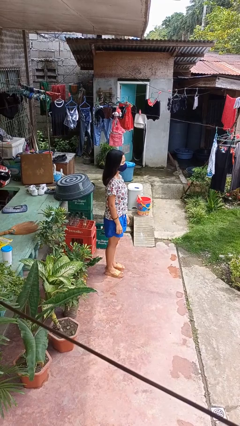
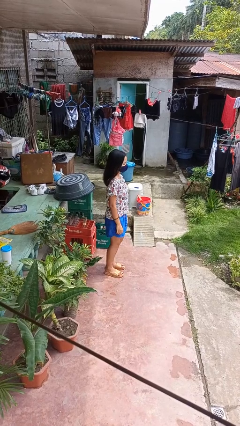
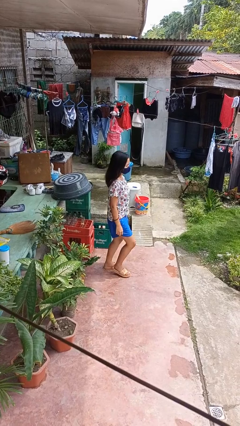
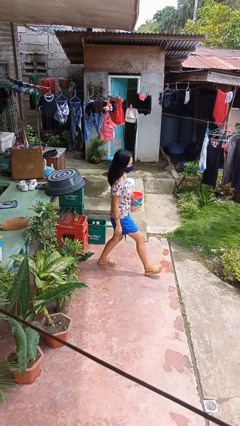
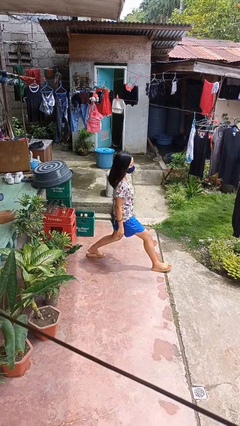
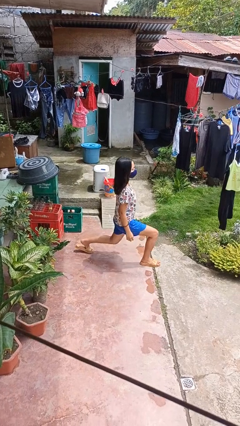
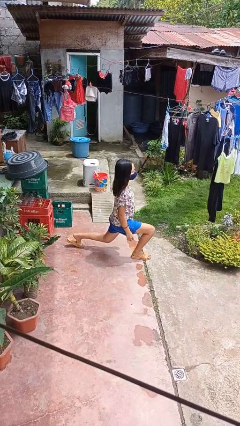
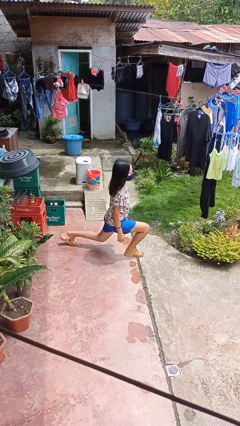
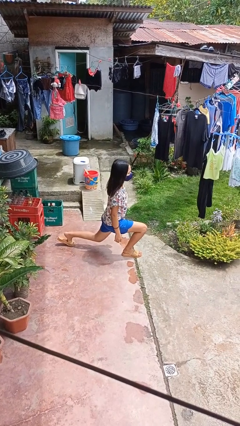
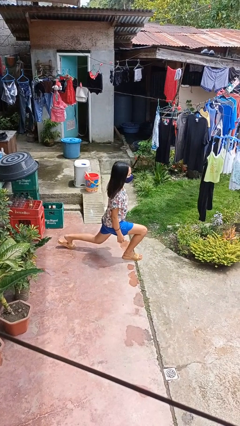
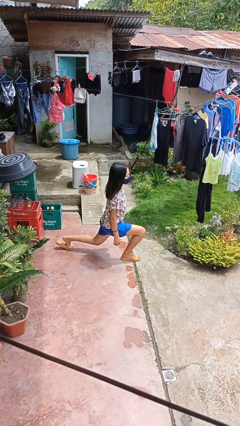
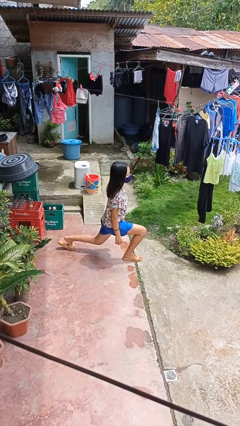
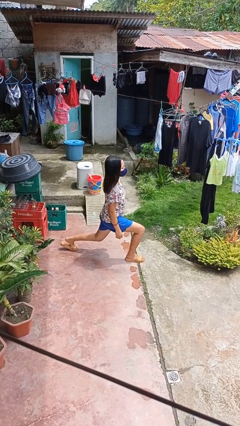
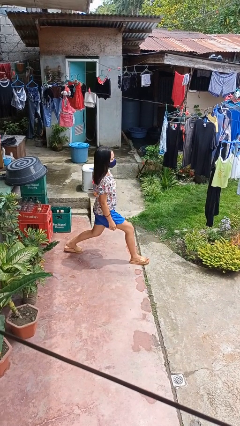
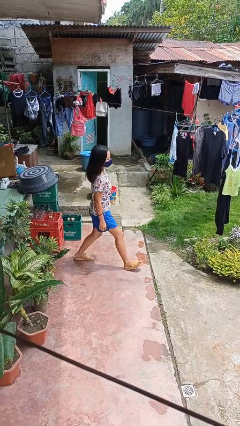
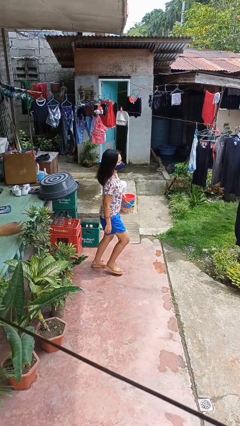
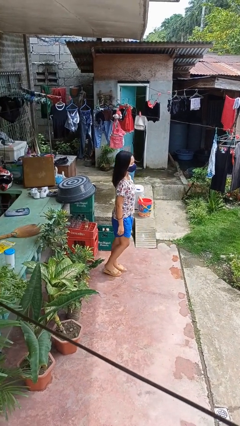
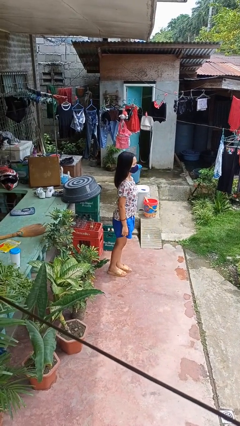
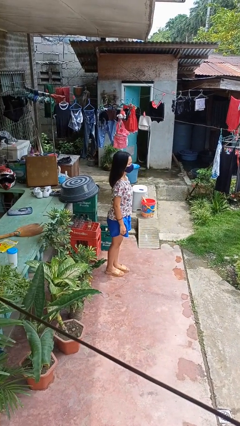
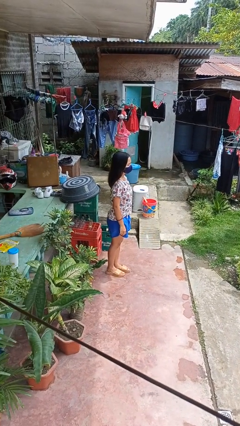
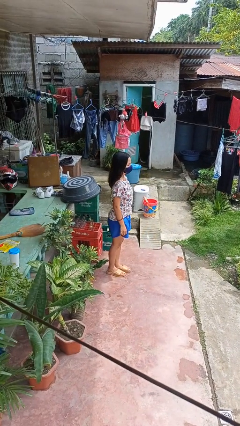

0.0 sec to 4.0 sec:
person exercises with lunges

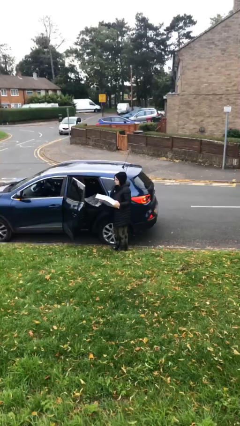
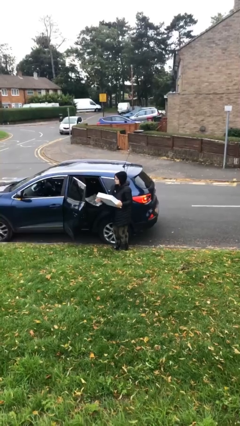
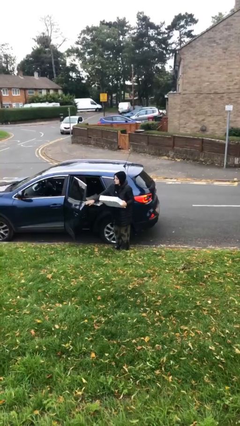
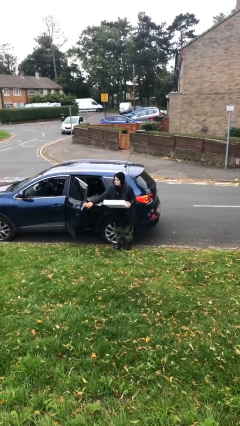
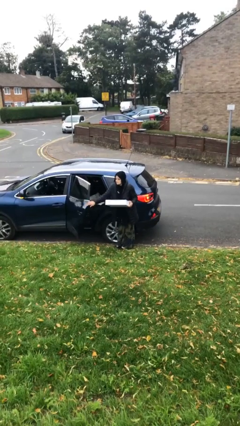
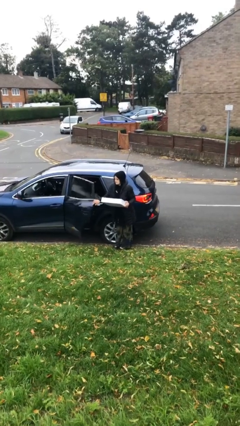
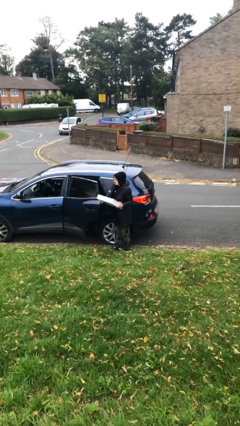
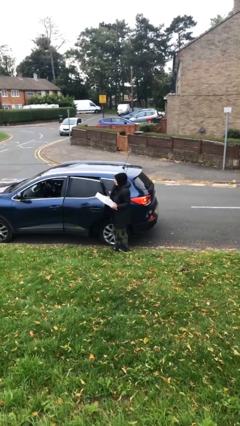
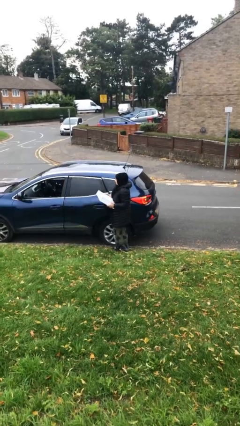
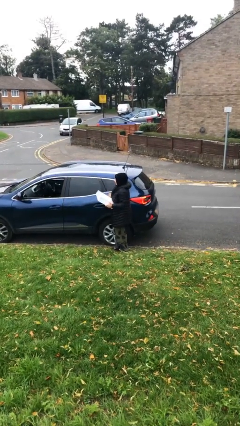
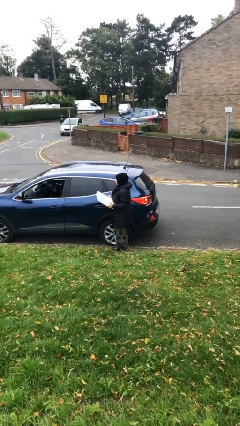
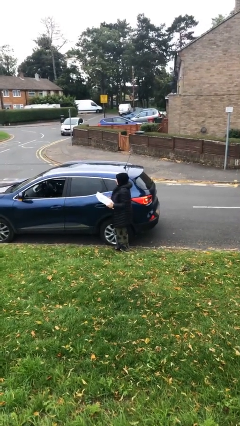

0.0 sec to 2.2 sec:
person closes car door

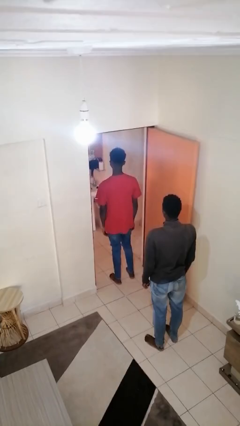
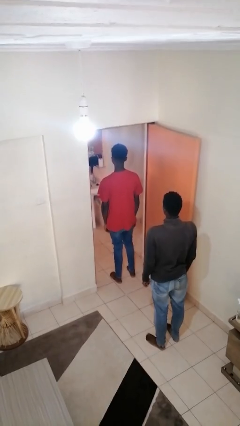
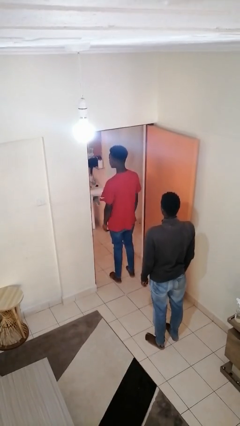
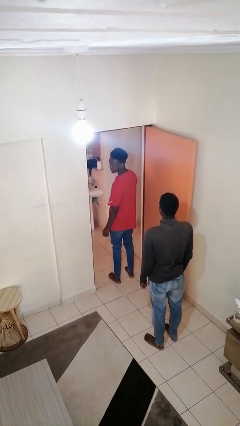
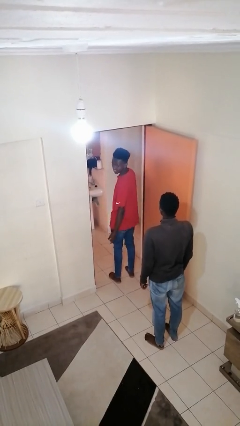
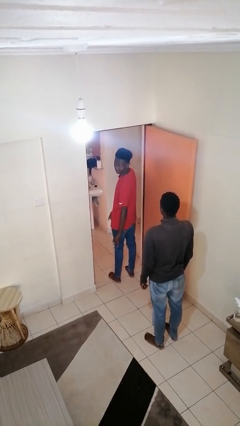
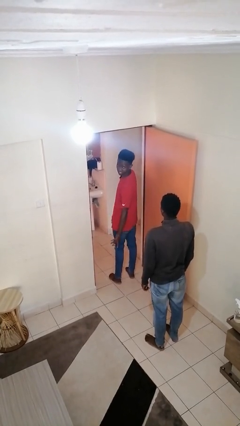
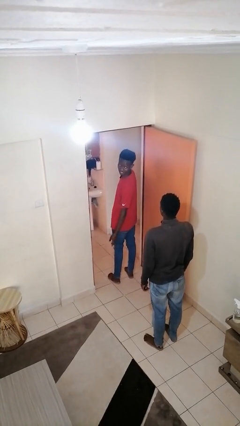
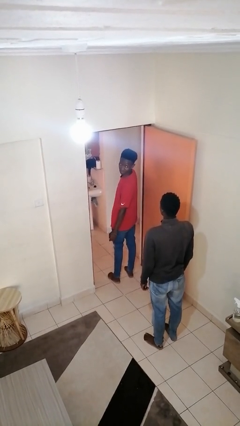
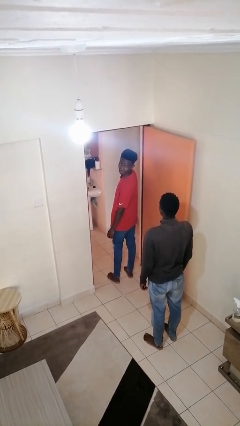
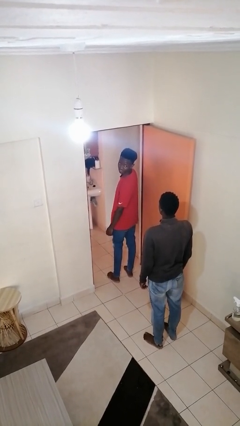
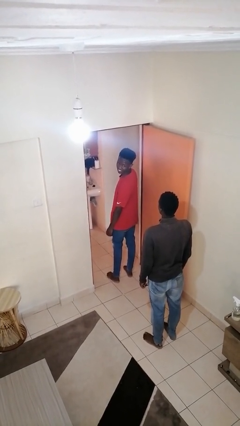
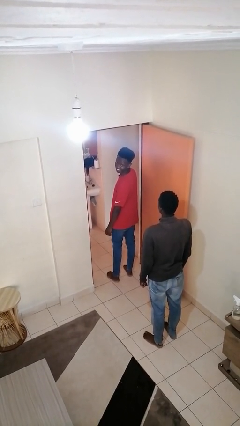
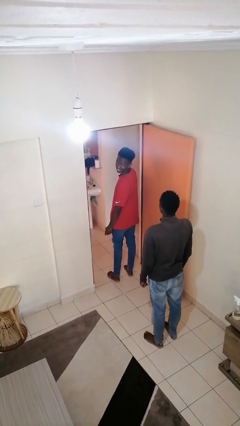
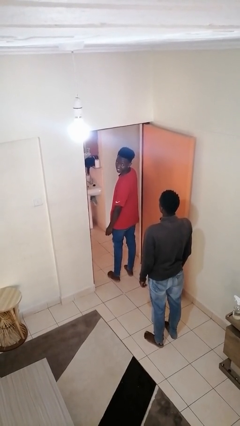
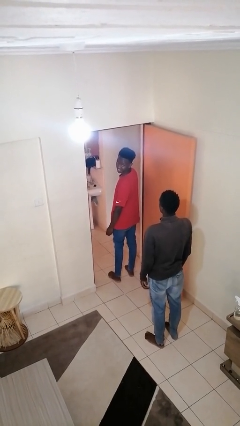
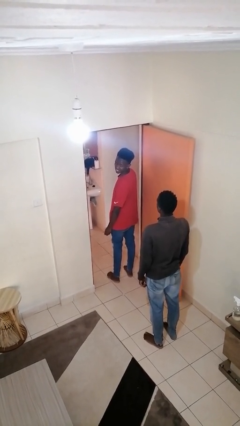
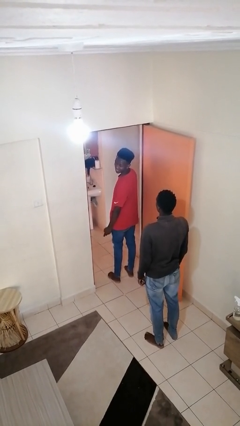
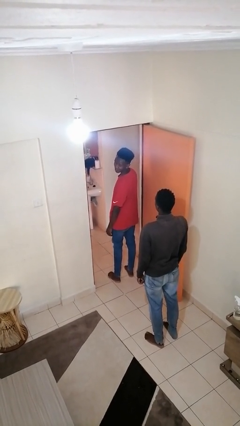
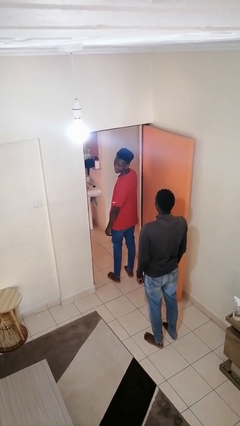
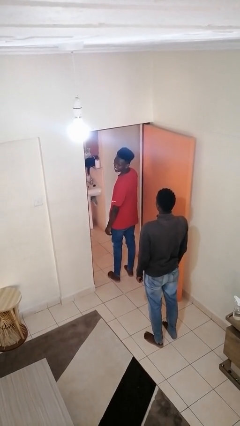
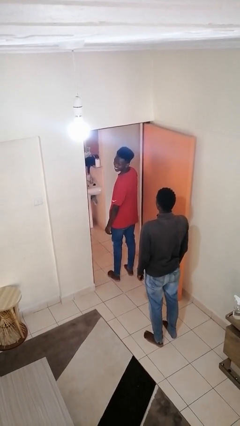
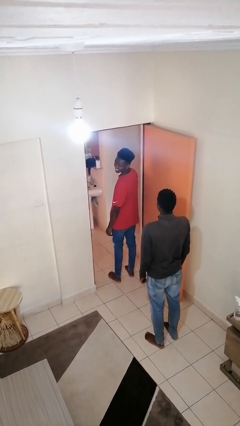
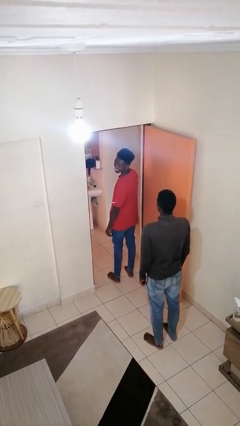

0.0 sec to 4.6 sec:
person looks over shoulder

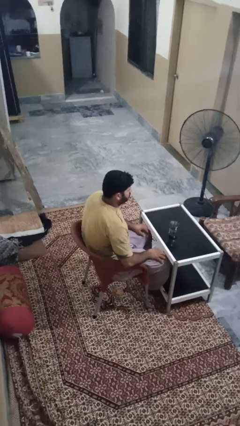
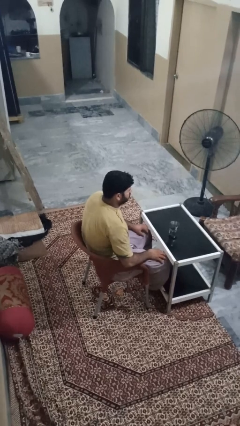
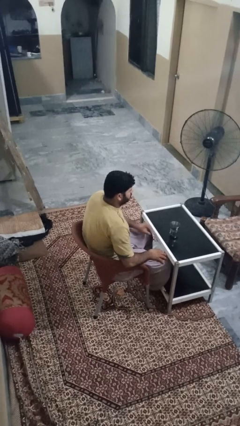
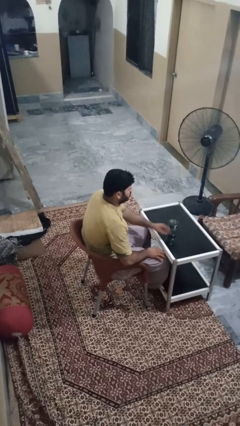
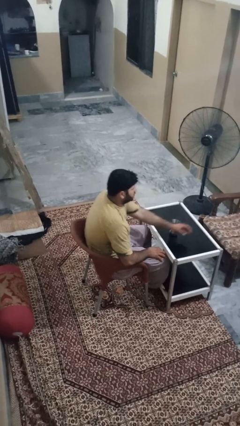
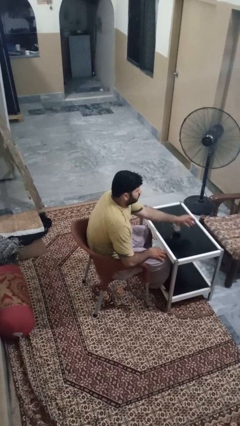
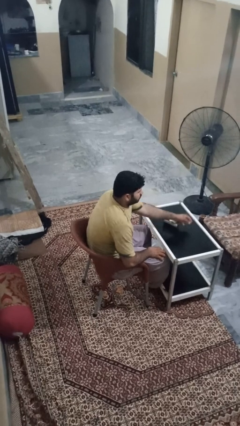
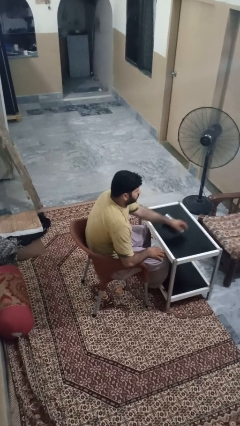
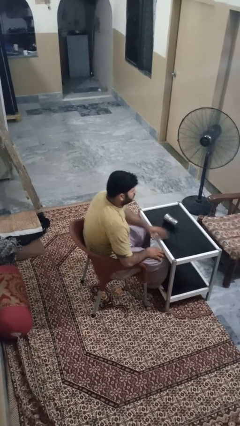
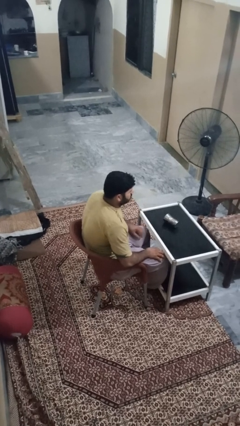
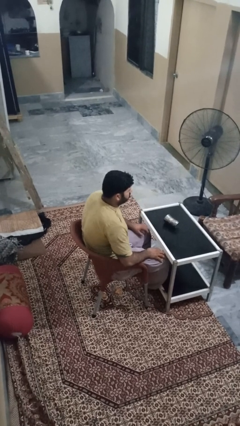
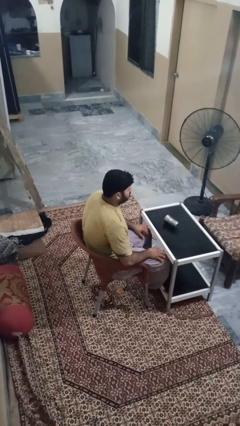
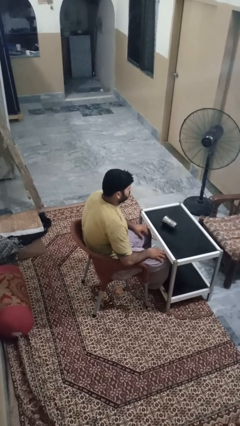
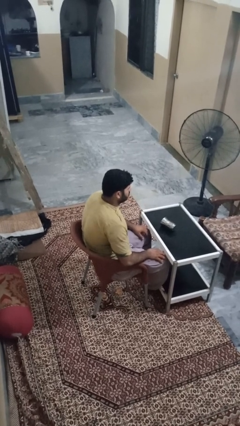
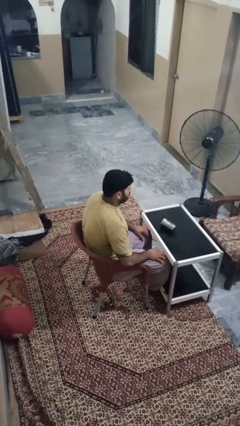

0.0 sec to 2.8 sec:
person knocks over glass

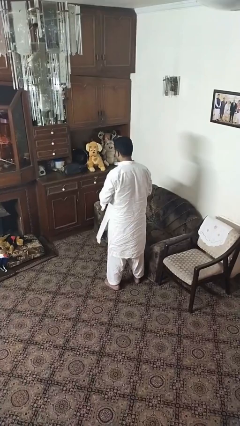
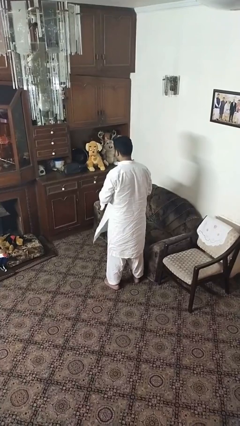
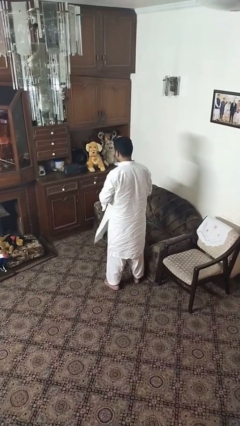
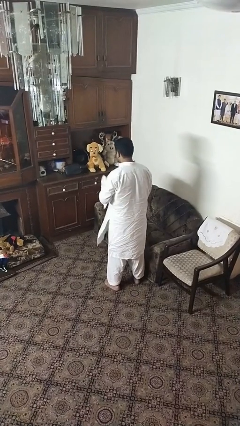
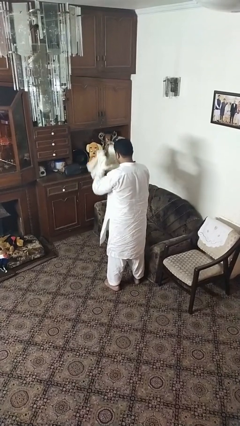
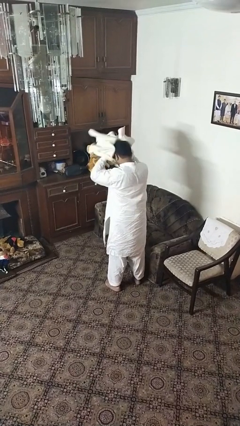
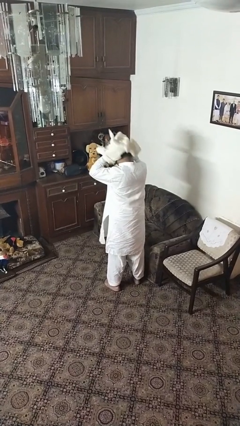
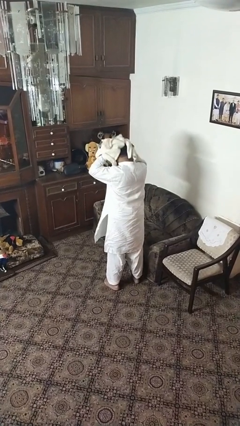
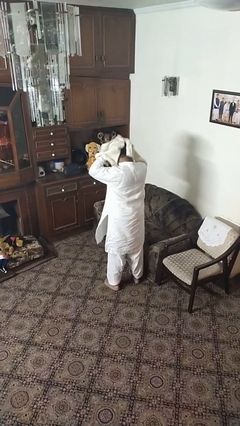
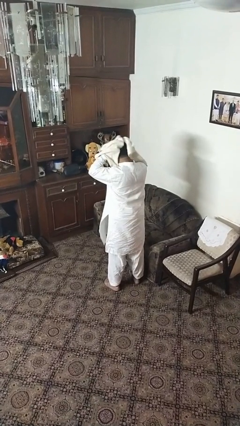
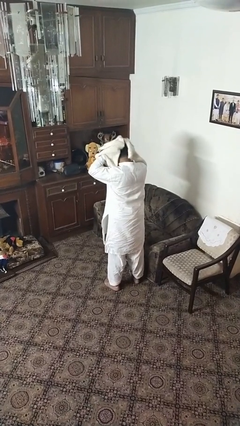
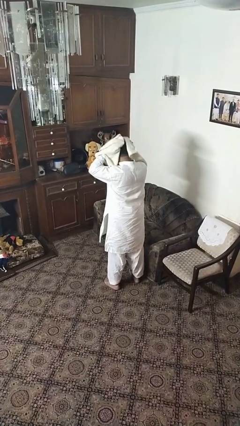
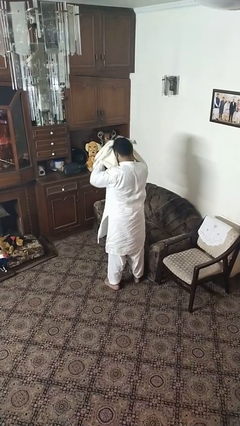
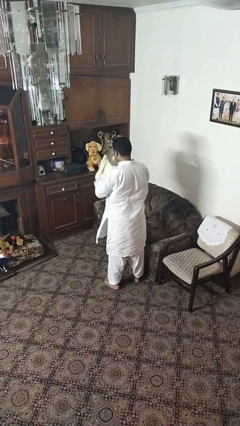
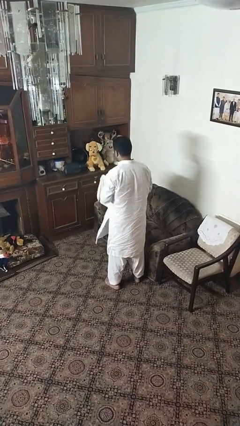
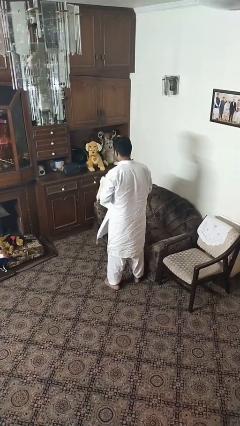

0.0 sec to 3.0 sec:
person dries hair with towel

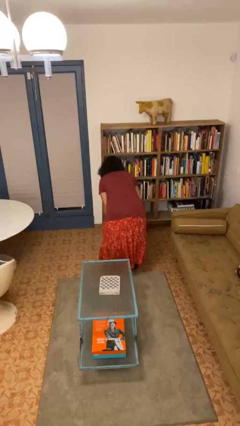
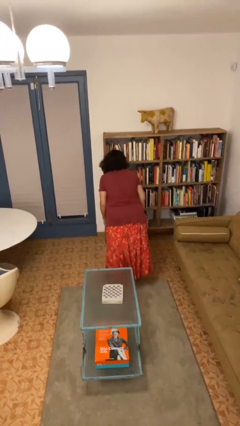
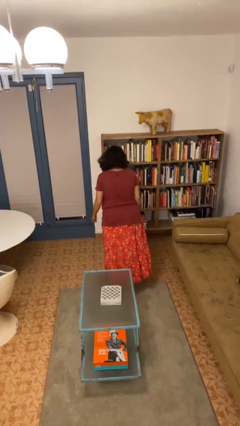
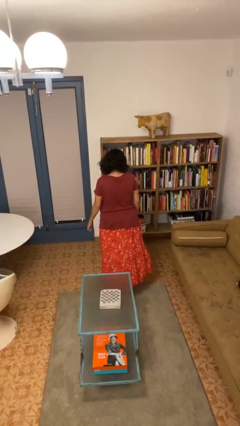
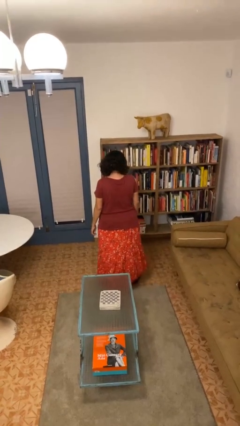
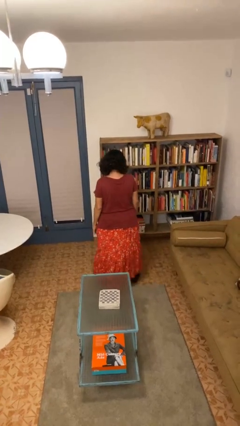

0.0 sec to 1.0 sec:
person stands up
